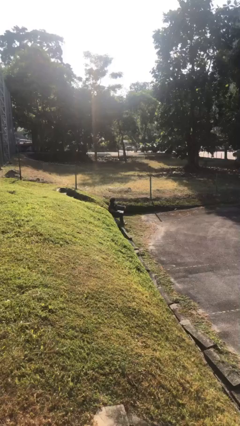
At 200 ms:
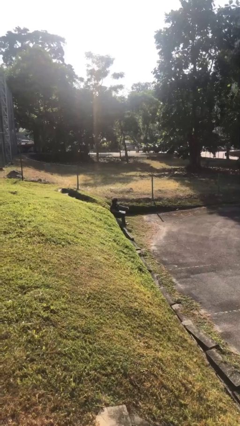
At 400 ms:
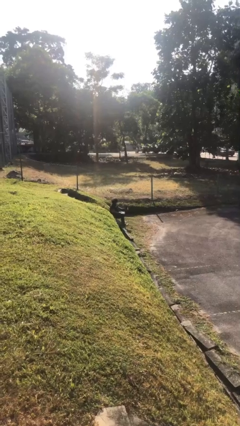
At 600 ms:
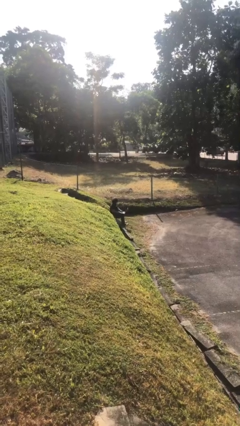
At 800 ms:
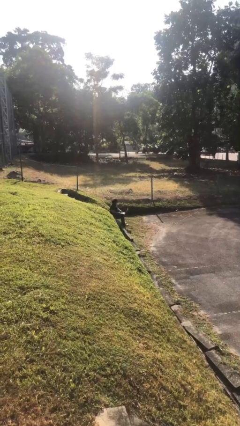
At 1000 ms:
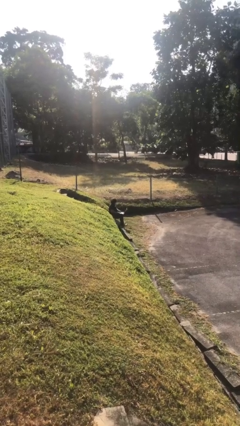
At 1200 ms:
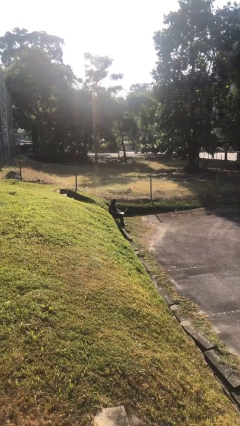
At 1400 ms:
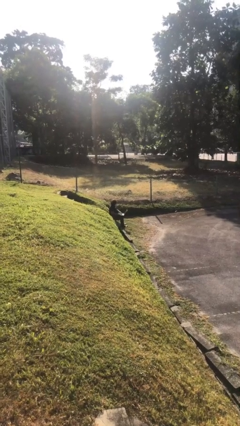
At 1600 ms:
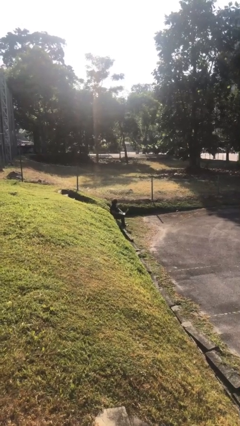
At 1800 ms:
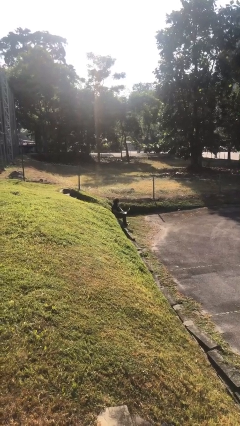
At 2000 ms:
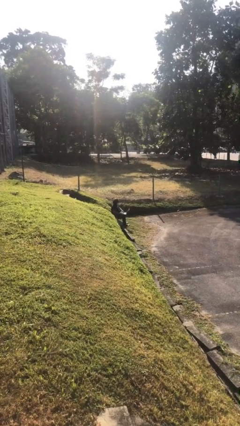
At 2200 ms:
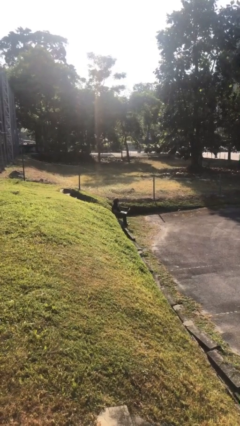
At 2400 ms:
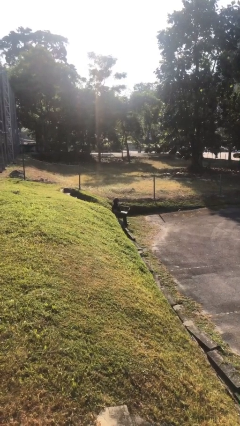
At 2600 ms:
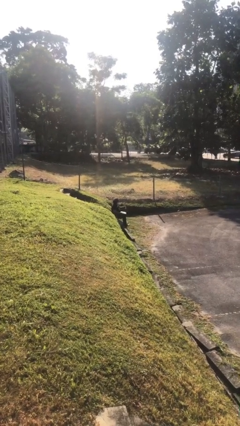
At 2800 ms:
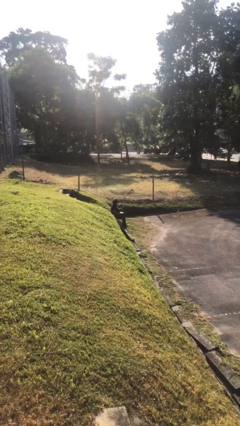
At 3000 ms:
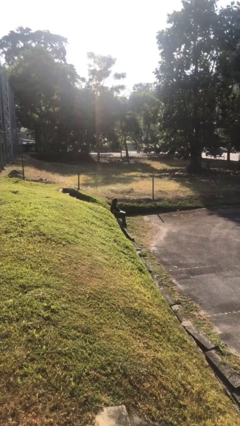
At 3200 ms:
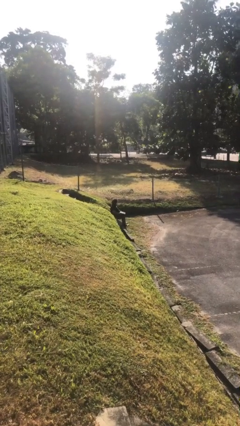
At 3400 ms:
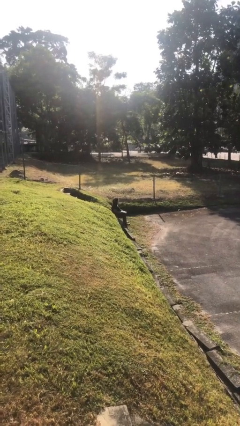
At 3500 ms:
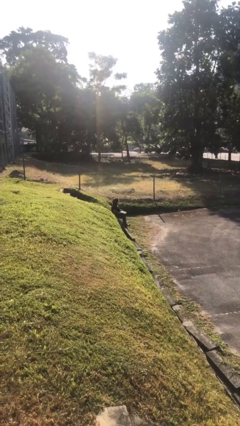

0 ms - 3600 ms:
person interacts with laptop

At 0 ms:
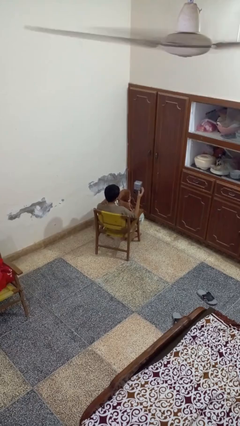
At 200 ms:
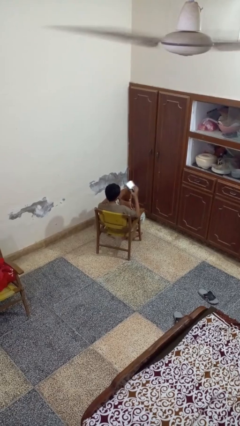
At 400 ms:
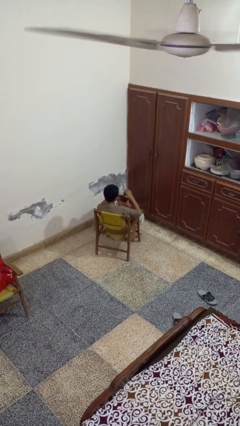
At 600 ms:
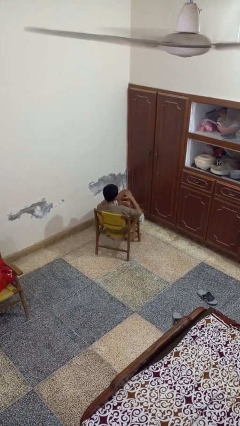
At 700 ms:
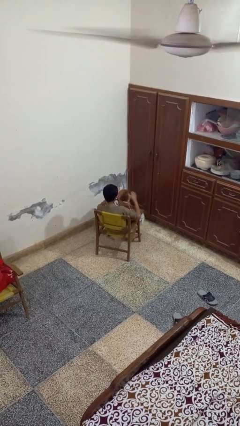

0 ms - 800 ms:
person puts object into bag

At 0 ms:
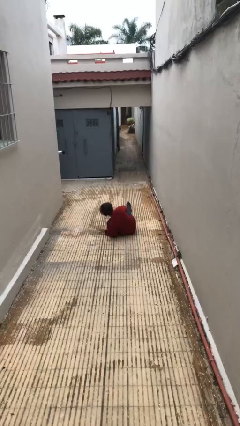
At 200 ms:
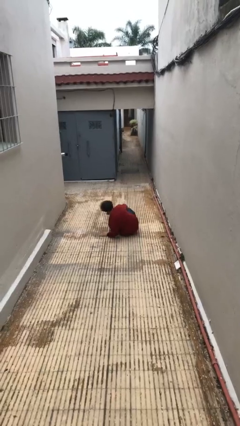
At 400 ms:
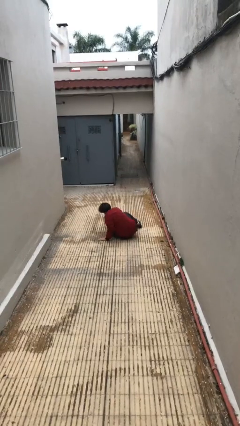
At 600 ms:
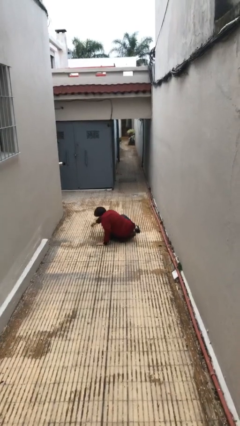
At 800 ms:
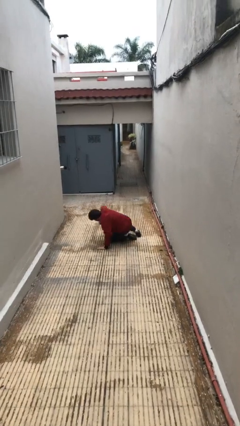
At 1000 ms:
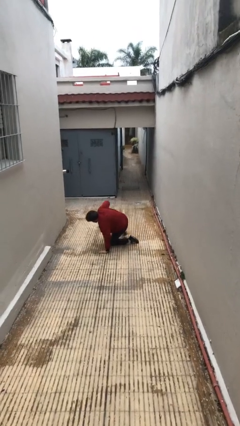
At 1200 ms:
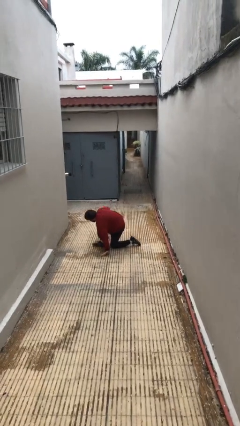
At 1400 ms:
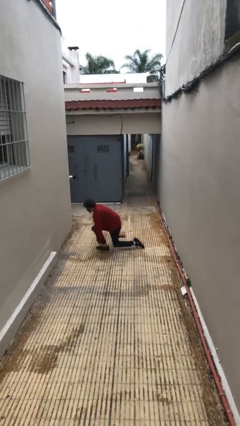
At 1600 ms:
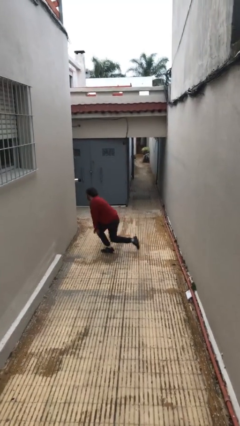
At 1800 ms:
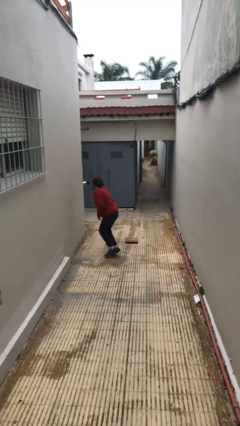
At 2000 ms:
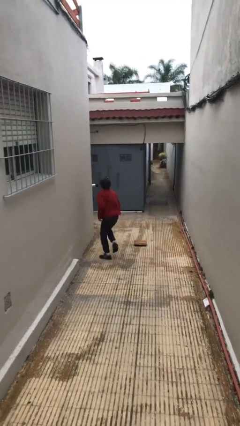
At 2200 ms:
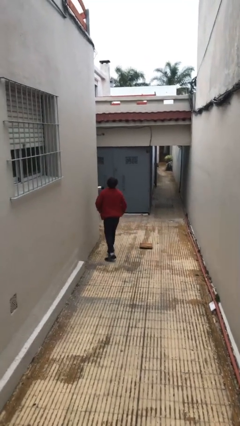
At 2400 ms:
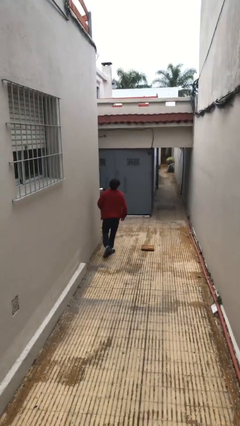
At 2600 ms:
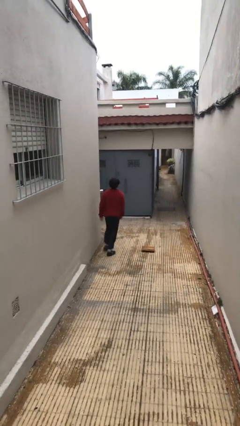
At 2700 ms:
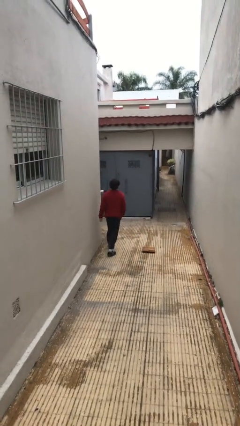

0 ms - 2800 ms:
person stands up from floor

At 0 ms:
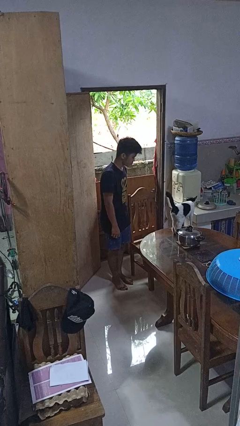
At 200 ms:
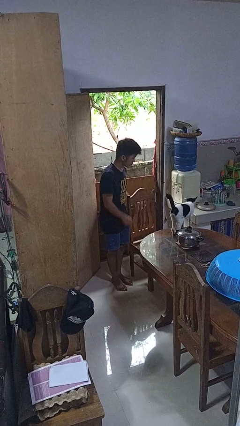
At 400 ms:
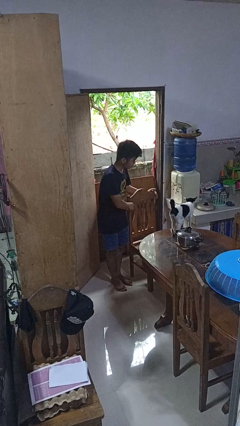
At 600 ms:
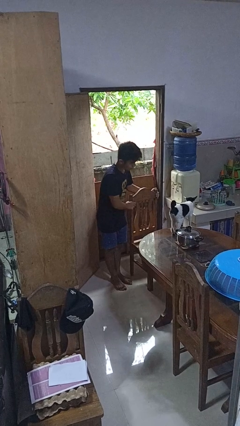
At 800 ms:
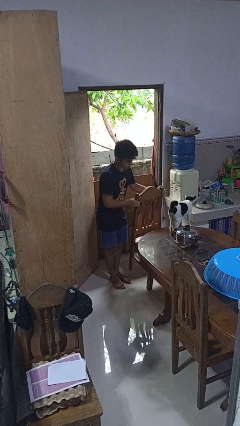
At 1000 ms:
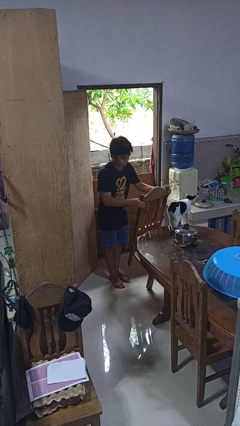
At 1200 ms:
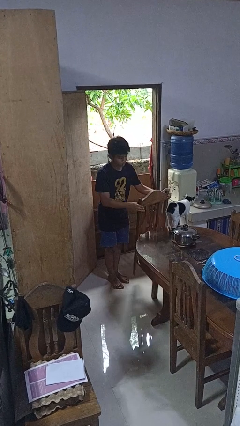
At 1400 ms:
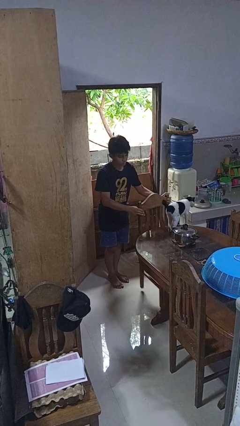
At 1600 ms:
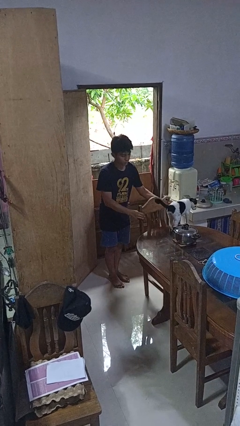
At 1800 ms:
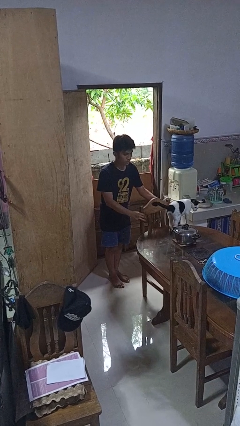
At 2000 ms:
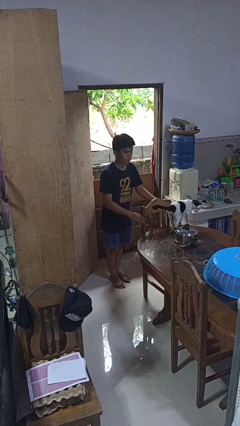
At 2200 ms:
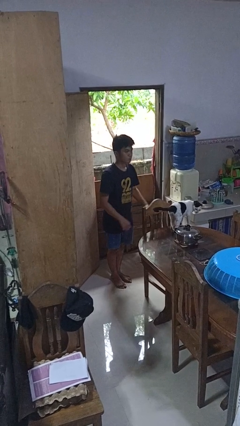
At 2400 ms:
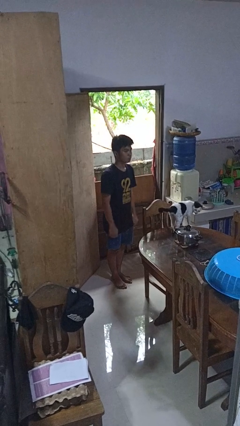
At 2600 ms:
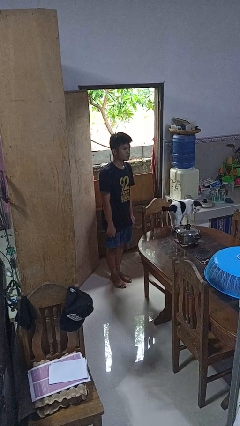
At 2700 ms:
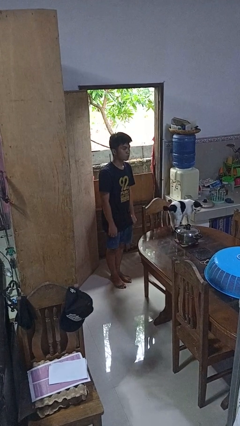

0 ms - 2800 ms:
person pushes in chair

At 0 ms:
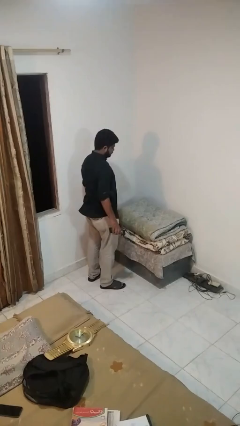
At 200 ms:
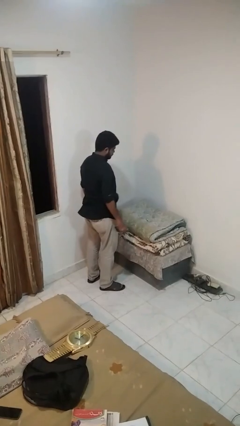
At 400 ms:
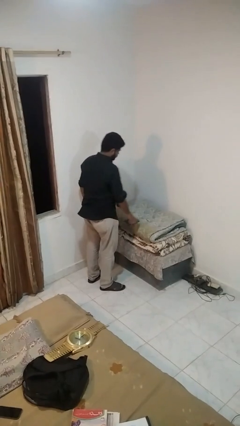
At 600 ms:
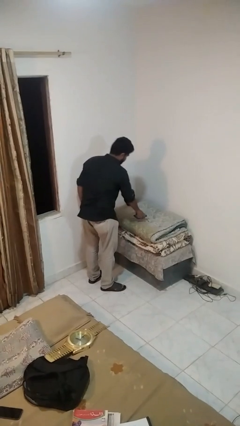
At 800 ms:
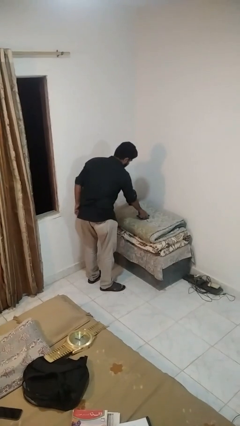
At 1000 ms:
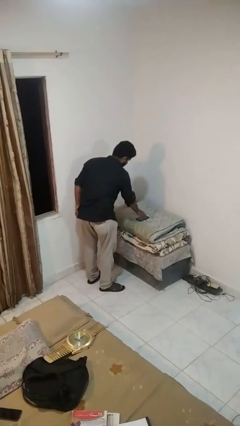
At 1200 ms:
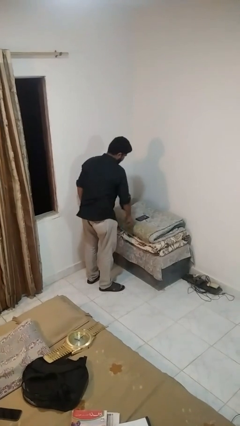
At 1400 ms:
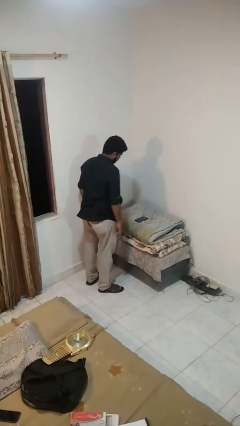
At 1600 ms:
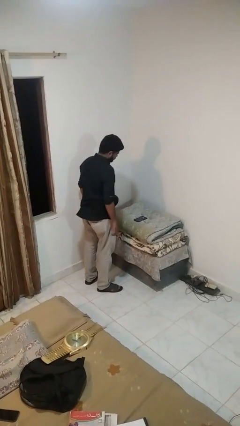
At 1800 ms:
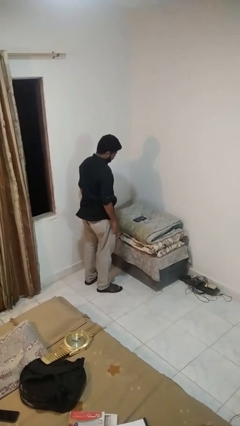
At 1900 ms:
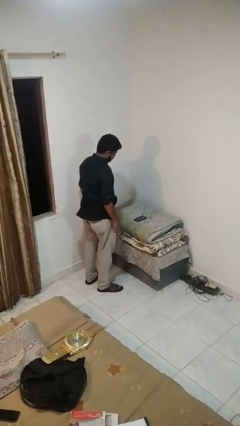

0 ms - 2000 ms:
person puts down object on couch

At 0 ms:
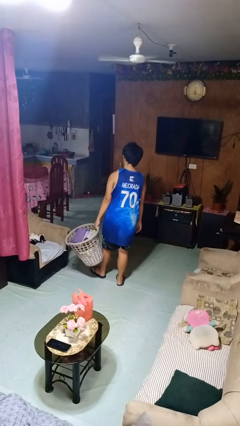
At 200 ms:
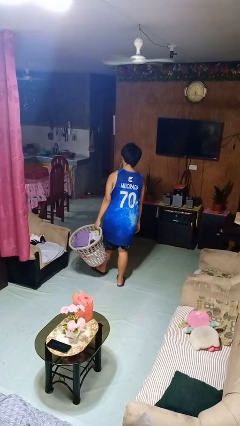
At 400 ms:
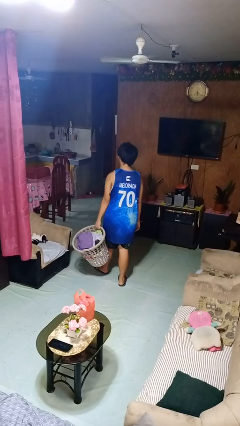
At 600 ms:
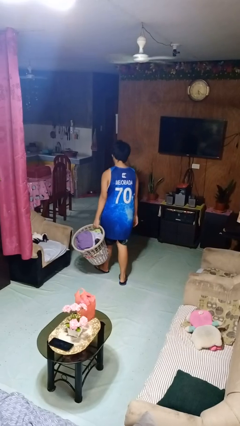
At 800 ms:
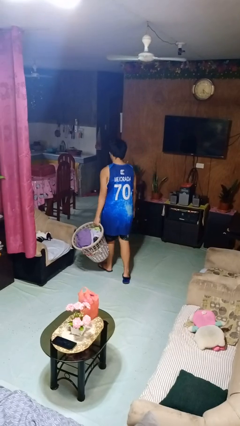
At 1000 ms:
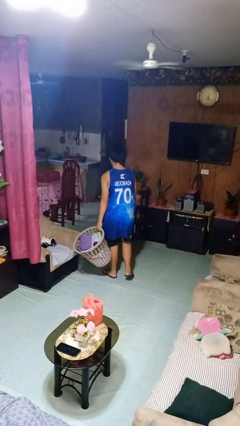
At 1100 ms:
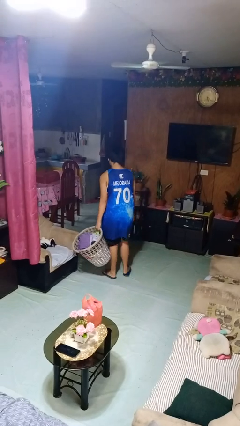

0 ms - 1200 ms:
person carries laundry basket

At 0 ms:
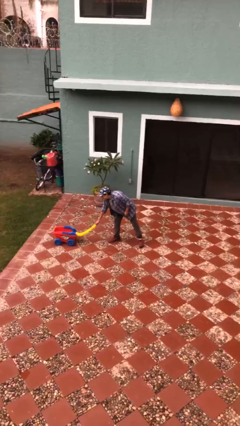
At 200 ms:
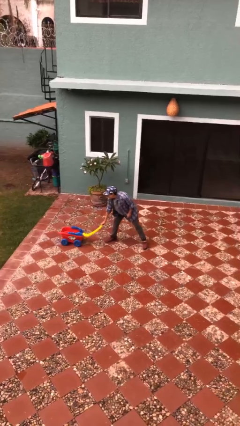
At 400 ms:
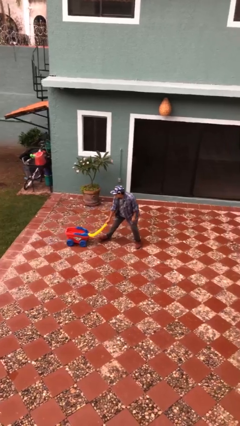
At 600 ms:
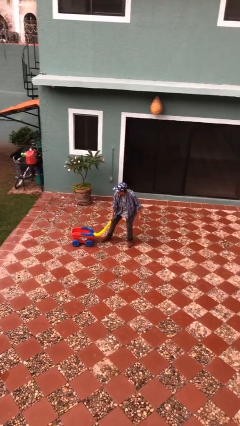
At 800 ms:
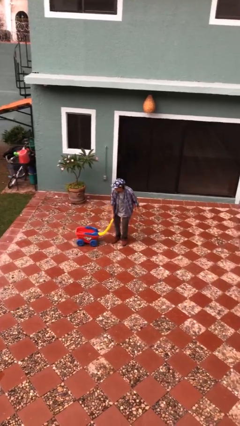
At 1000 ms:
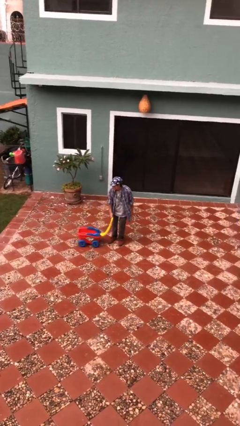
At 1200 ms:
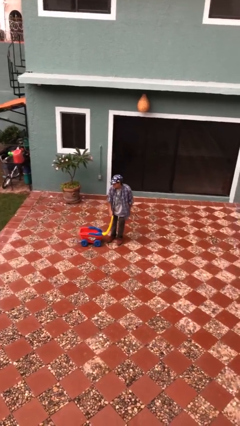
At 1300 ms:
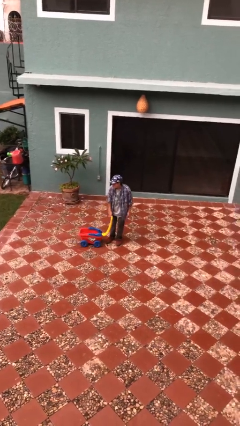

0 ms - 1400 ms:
person pulls wheeled cart

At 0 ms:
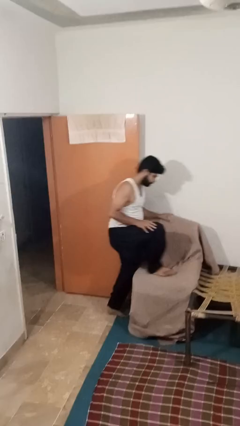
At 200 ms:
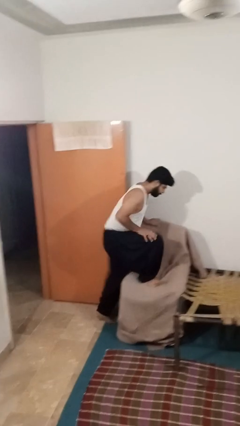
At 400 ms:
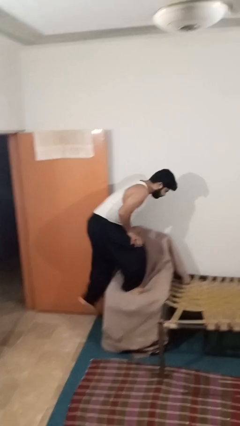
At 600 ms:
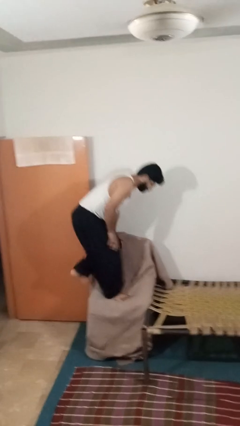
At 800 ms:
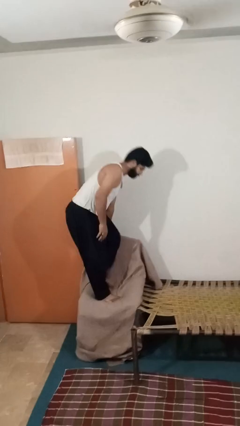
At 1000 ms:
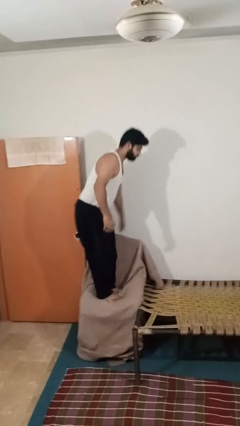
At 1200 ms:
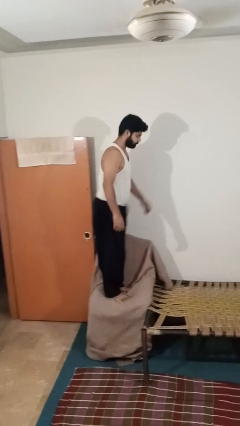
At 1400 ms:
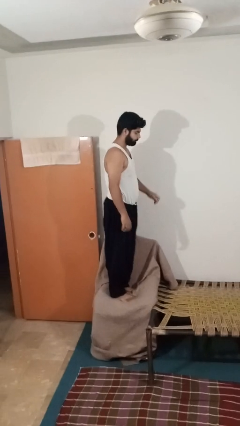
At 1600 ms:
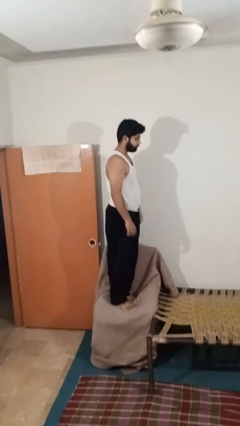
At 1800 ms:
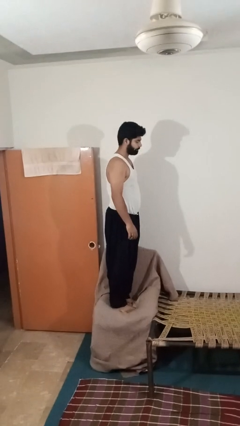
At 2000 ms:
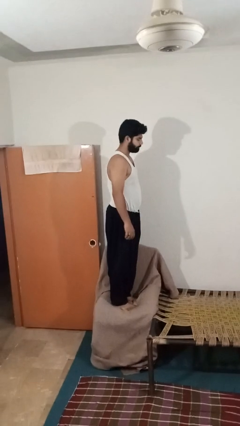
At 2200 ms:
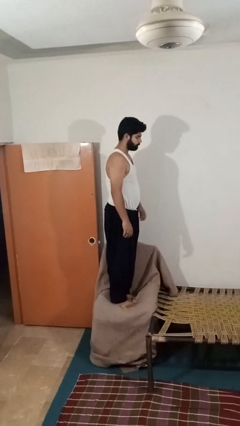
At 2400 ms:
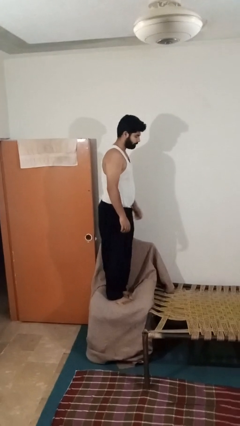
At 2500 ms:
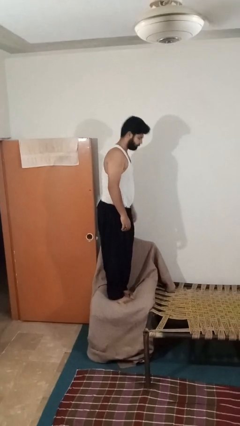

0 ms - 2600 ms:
person climbs on couch
